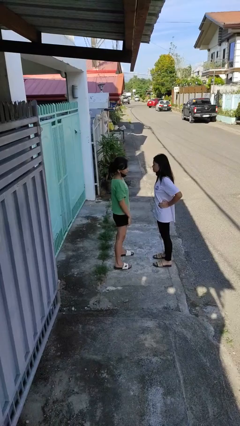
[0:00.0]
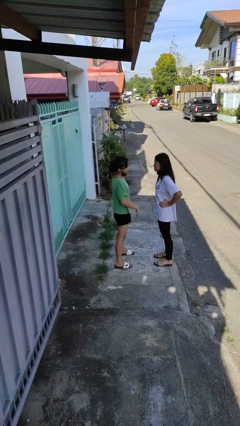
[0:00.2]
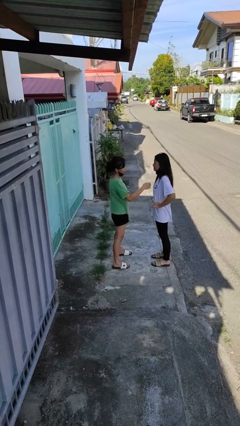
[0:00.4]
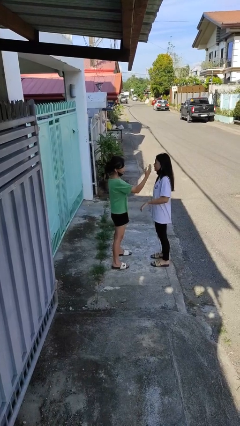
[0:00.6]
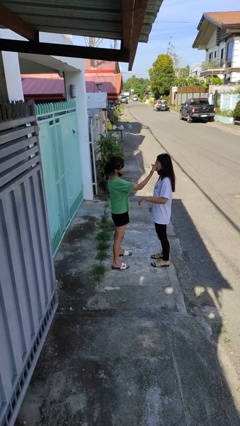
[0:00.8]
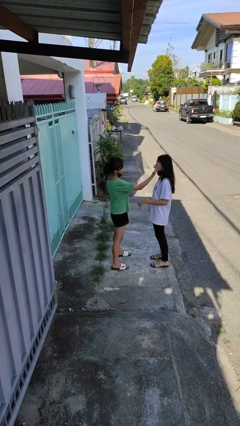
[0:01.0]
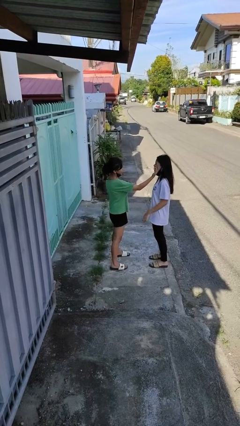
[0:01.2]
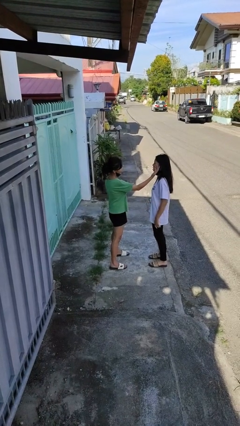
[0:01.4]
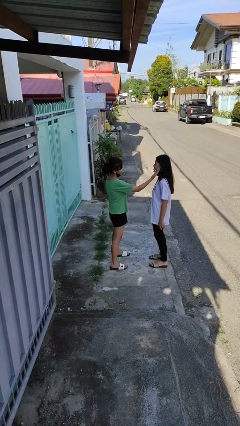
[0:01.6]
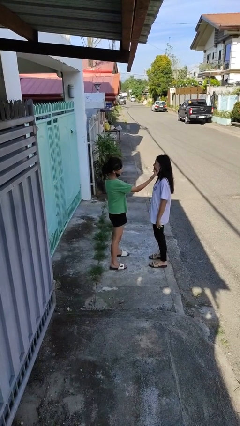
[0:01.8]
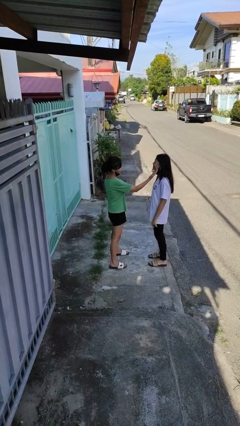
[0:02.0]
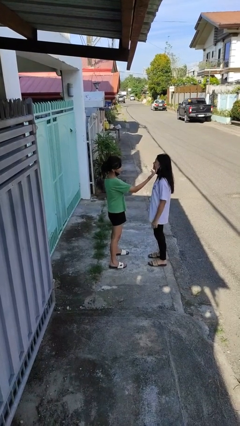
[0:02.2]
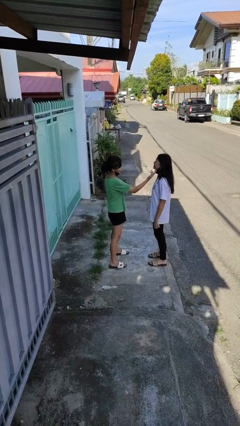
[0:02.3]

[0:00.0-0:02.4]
person touches face of person

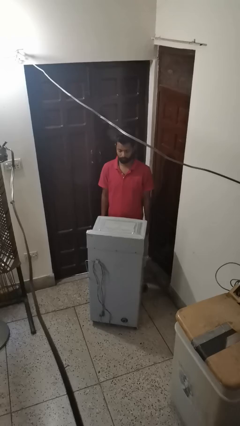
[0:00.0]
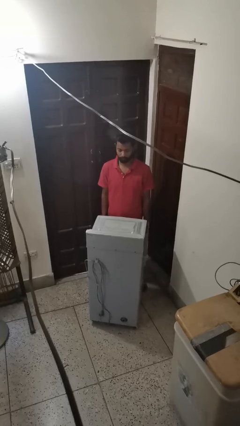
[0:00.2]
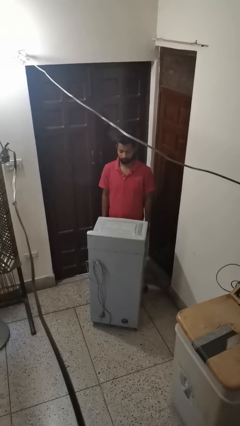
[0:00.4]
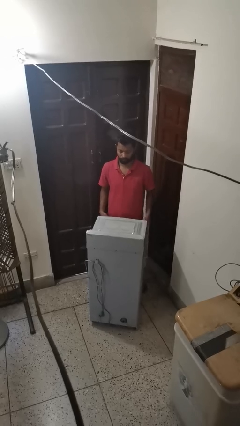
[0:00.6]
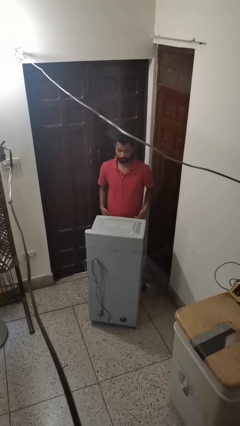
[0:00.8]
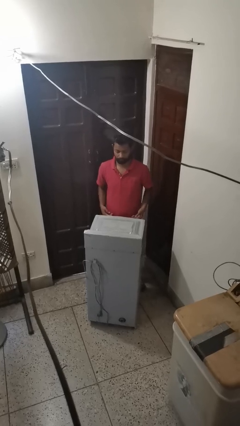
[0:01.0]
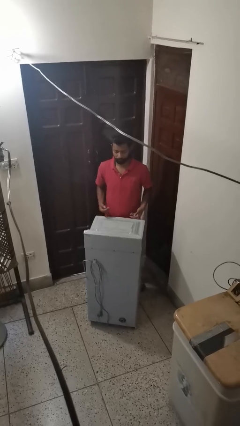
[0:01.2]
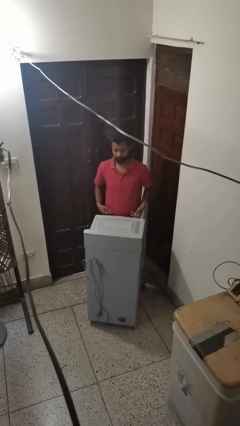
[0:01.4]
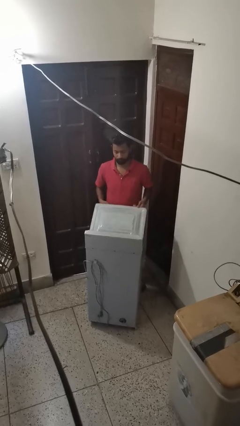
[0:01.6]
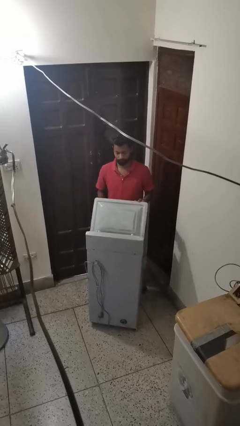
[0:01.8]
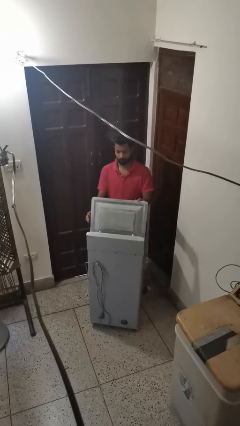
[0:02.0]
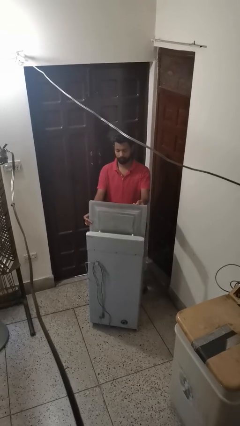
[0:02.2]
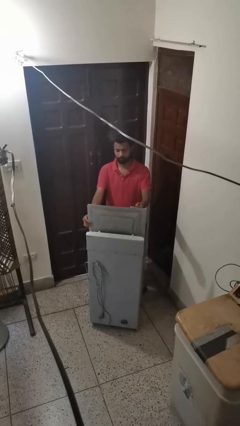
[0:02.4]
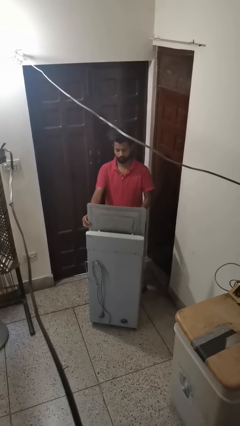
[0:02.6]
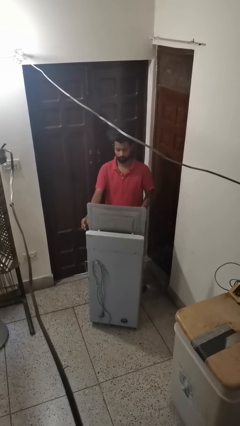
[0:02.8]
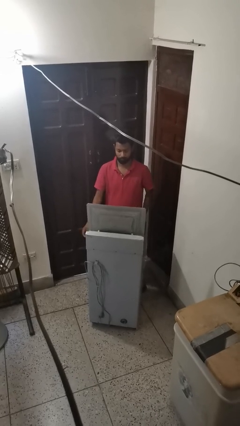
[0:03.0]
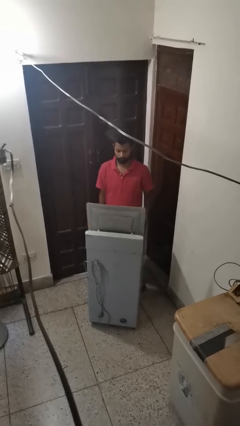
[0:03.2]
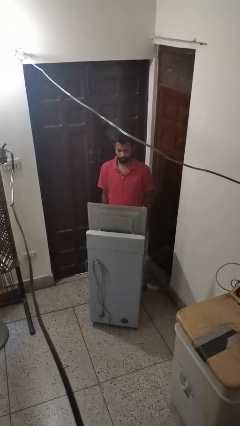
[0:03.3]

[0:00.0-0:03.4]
person opens clothes washer

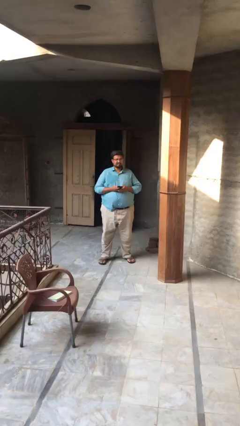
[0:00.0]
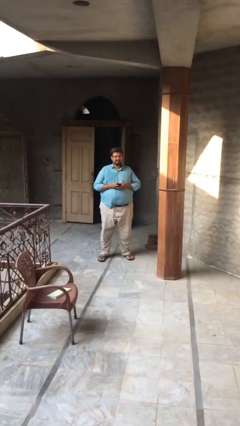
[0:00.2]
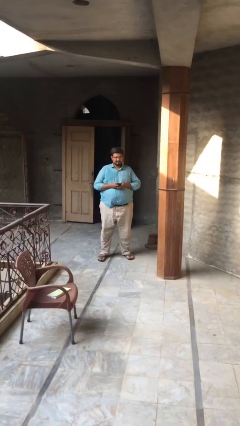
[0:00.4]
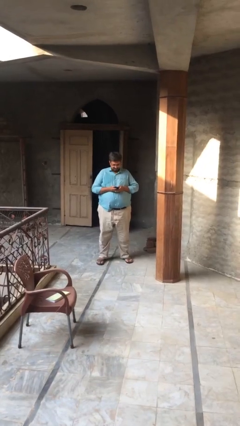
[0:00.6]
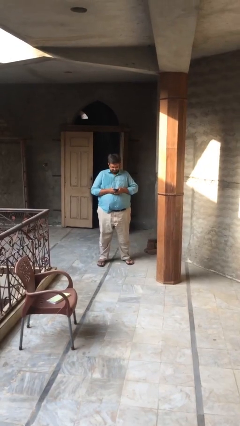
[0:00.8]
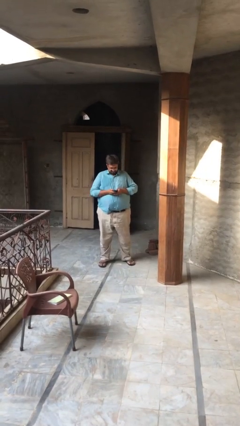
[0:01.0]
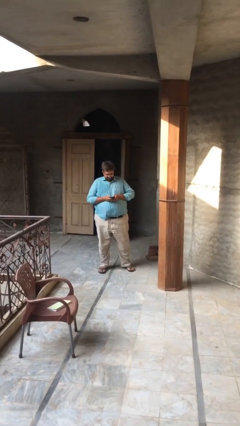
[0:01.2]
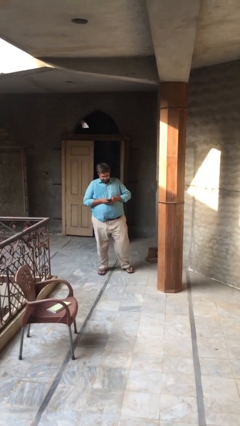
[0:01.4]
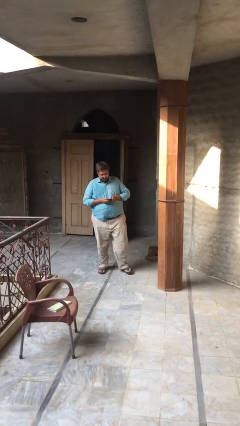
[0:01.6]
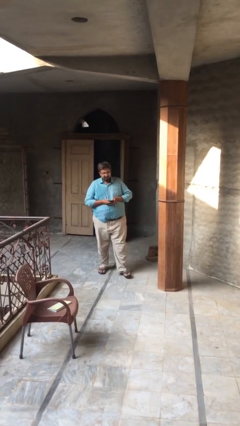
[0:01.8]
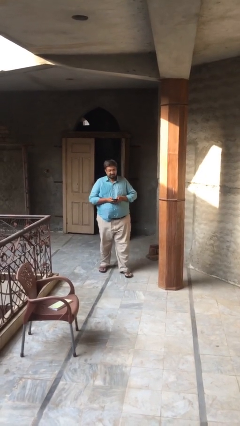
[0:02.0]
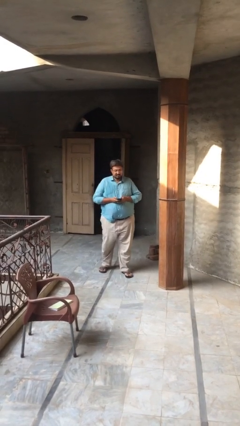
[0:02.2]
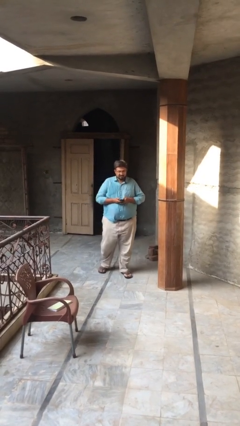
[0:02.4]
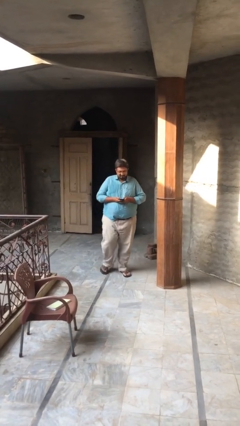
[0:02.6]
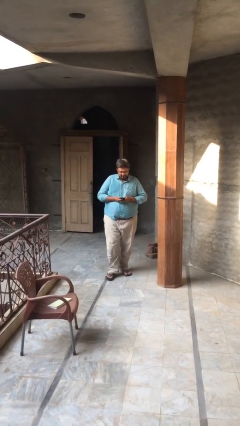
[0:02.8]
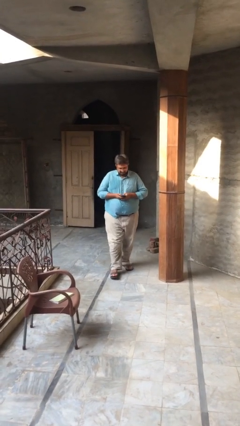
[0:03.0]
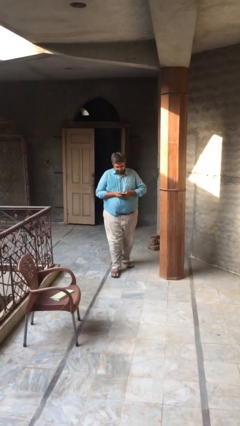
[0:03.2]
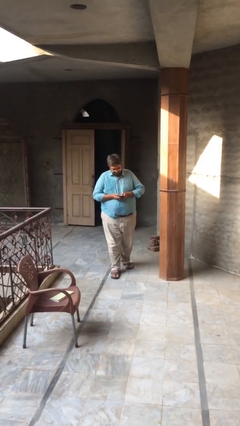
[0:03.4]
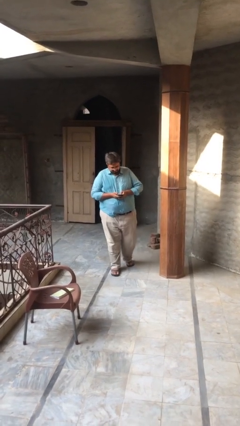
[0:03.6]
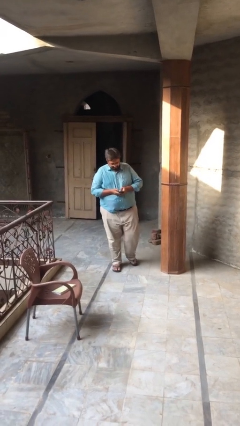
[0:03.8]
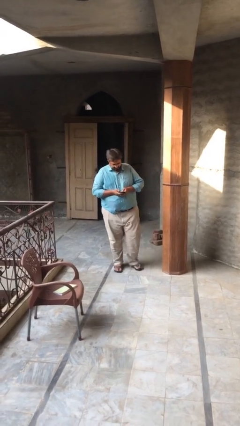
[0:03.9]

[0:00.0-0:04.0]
person texts on phone

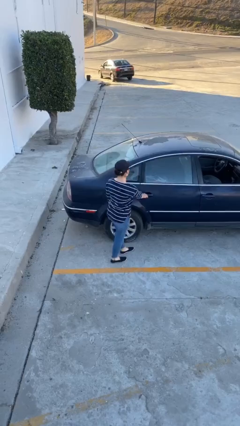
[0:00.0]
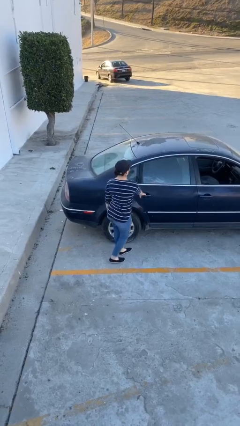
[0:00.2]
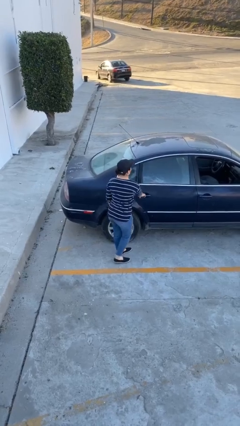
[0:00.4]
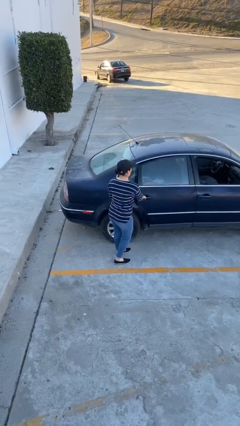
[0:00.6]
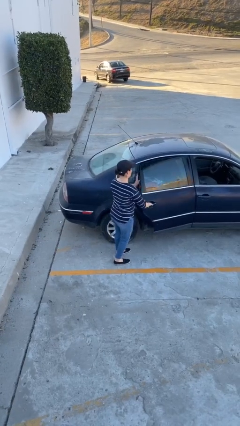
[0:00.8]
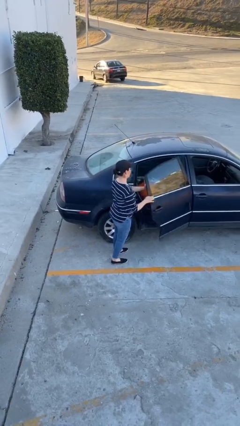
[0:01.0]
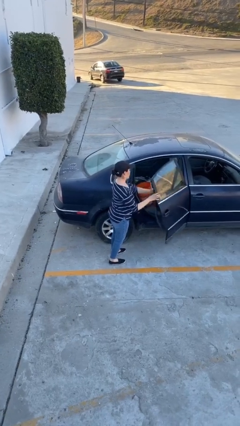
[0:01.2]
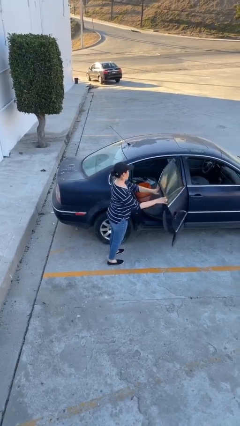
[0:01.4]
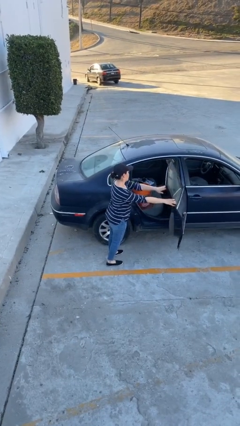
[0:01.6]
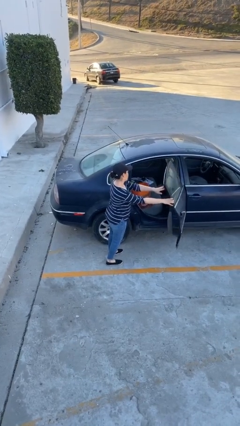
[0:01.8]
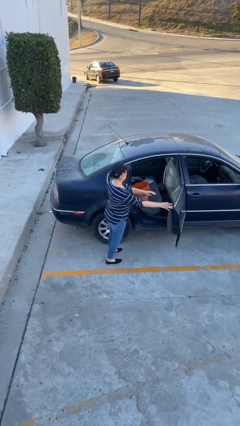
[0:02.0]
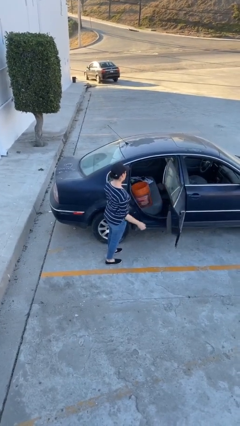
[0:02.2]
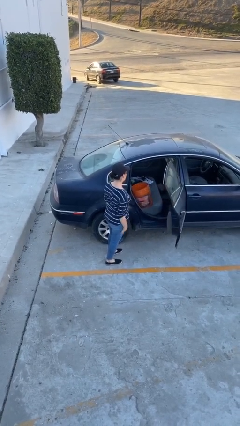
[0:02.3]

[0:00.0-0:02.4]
person opens car door

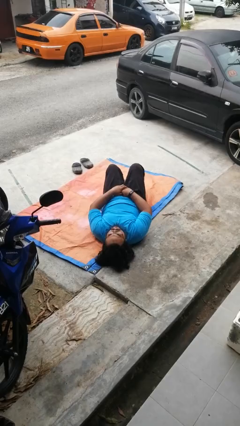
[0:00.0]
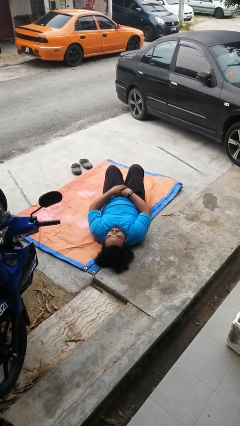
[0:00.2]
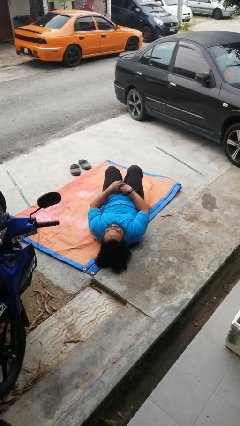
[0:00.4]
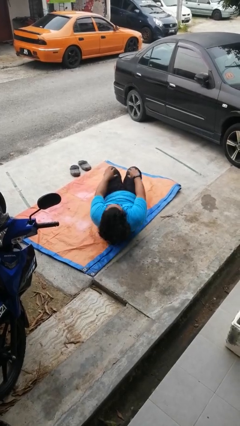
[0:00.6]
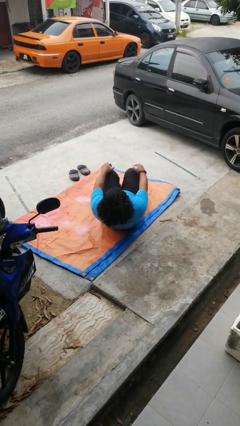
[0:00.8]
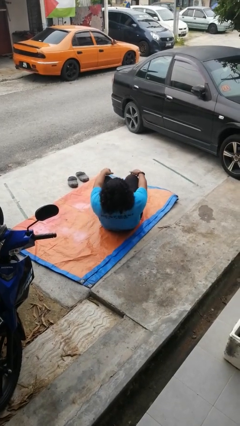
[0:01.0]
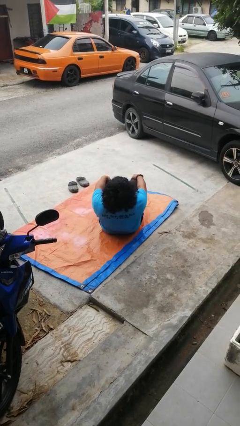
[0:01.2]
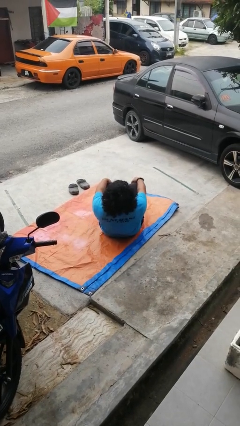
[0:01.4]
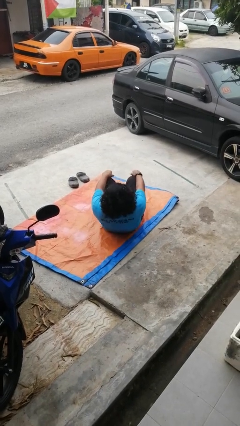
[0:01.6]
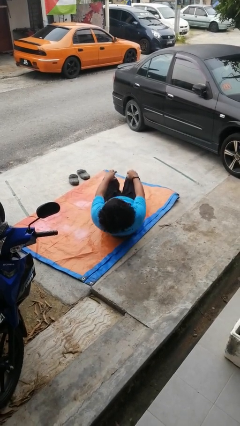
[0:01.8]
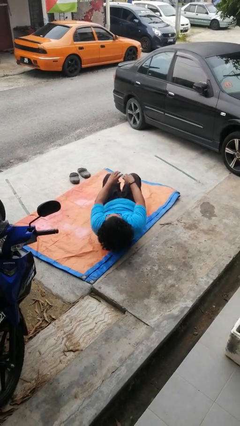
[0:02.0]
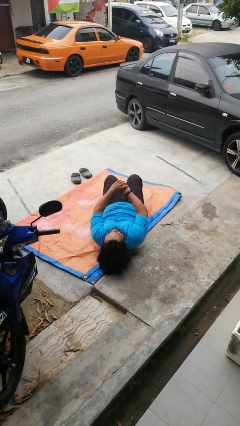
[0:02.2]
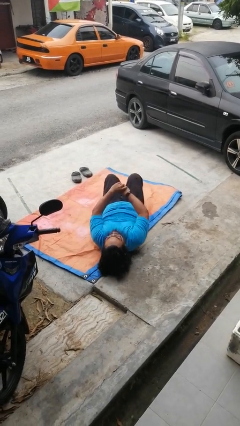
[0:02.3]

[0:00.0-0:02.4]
person exercises with situp

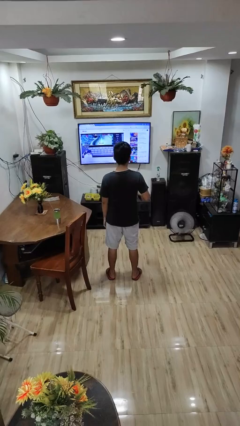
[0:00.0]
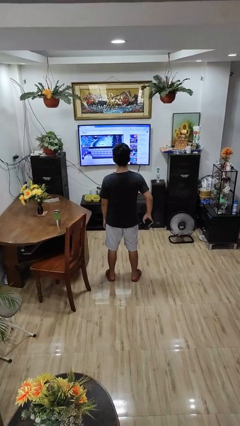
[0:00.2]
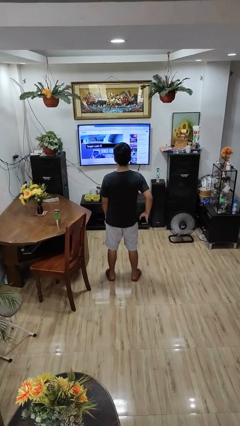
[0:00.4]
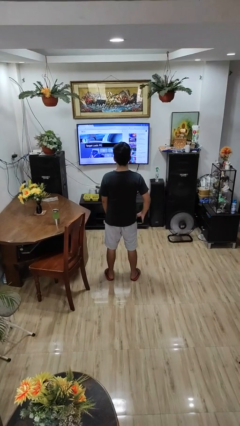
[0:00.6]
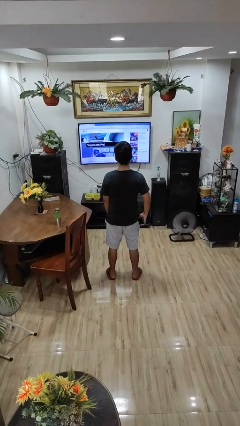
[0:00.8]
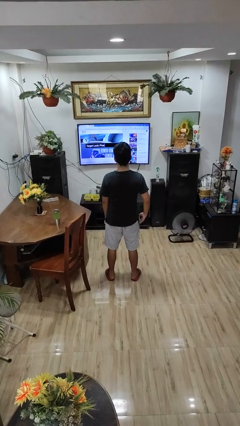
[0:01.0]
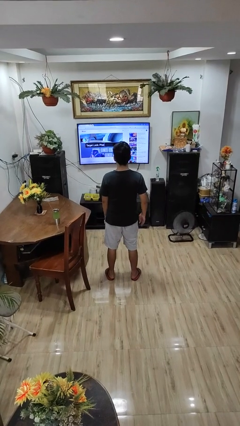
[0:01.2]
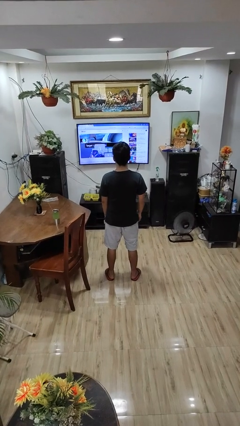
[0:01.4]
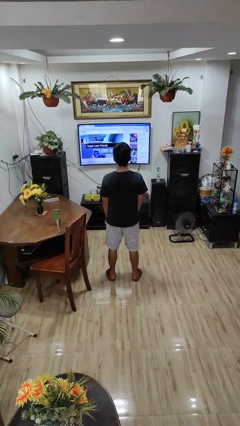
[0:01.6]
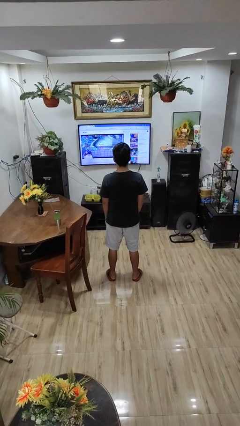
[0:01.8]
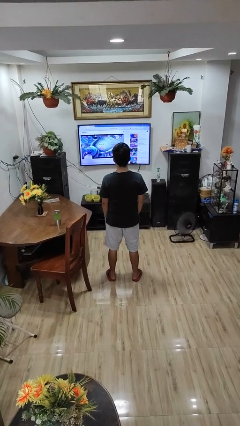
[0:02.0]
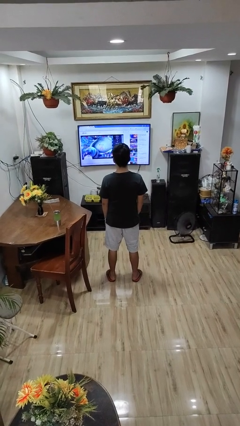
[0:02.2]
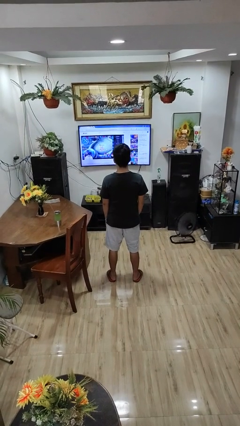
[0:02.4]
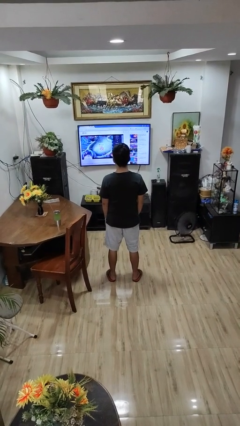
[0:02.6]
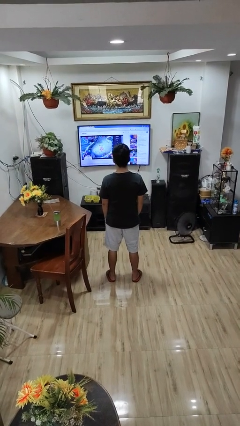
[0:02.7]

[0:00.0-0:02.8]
person puts phone into pocket

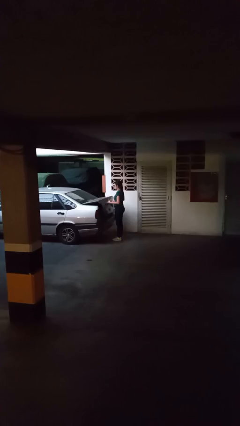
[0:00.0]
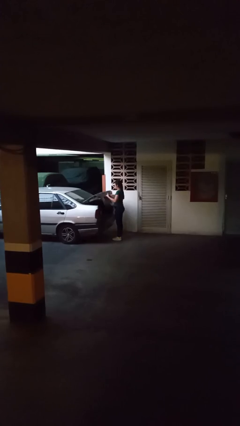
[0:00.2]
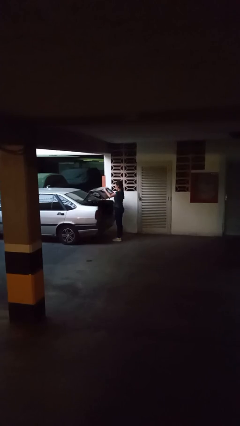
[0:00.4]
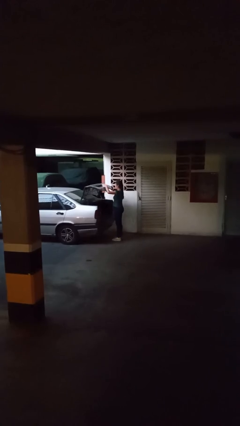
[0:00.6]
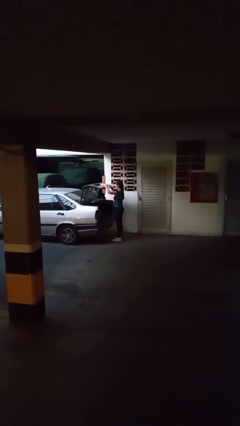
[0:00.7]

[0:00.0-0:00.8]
person opens car trunk
